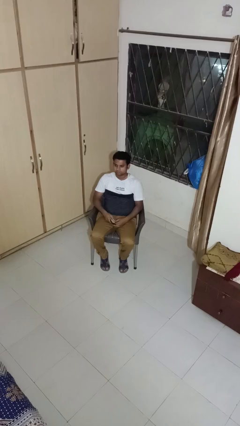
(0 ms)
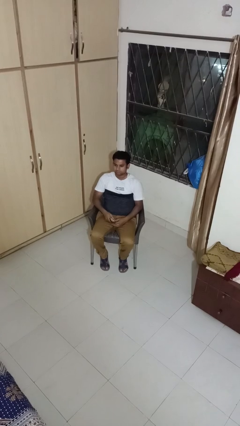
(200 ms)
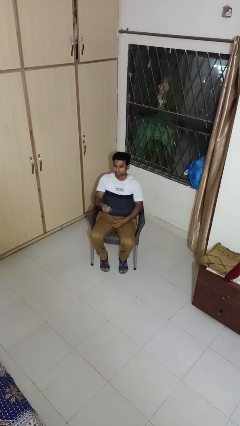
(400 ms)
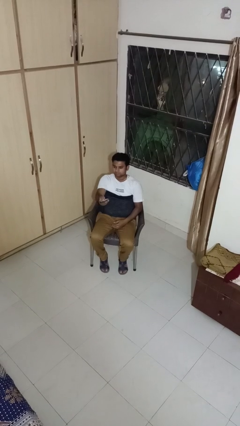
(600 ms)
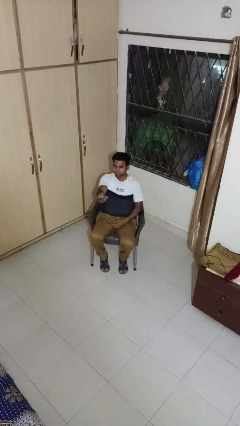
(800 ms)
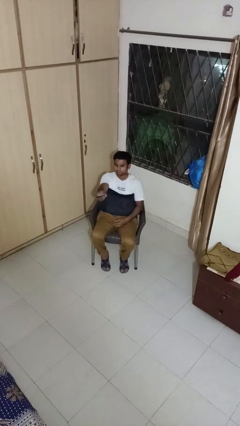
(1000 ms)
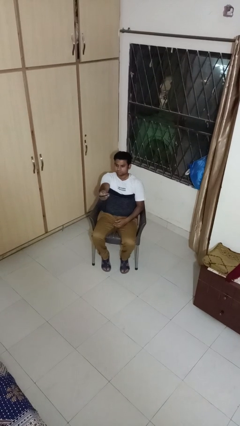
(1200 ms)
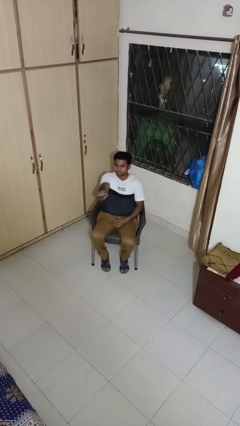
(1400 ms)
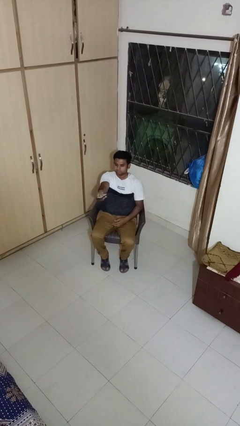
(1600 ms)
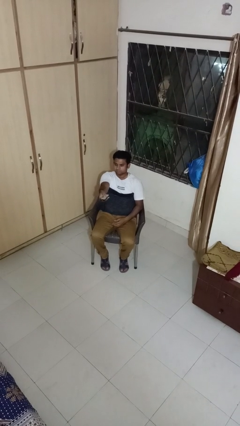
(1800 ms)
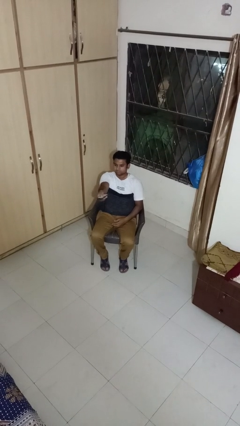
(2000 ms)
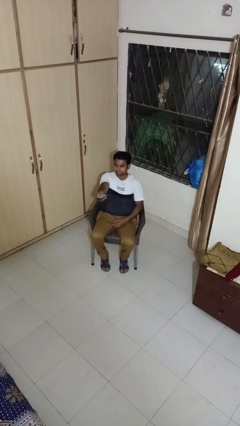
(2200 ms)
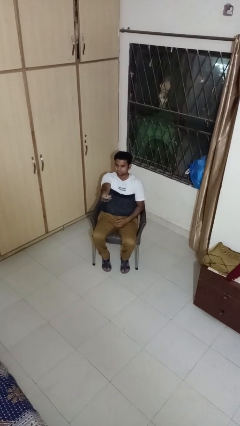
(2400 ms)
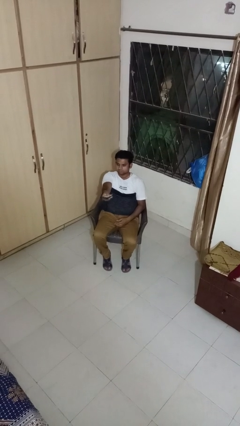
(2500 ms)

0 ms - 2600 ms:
person uses television remote

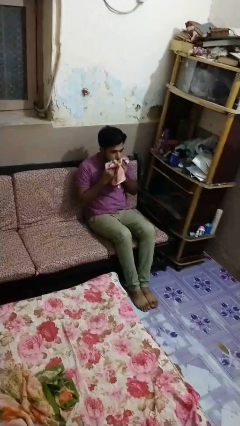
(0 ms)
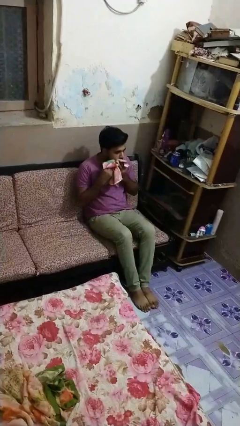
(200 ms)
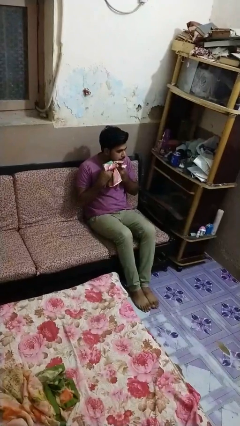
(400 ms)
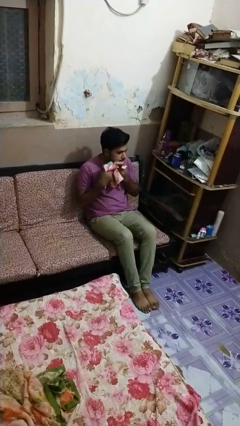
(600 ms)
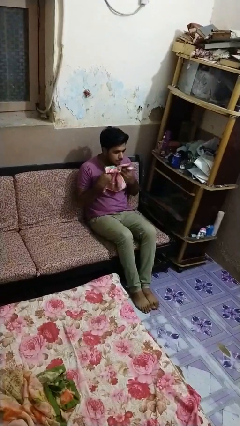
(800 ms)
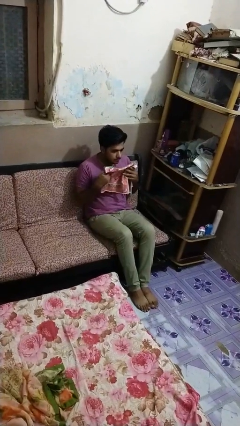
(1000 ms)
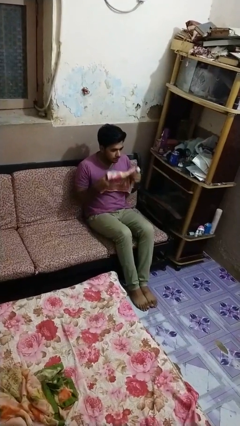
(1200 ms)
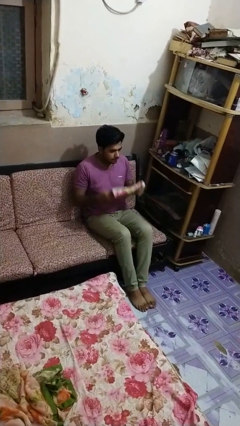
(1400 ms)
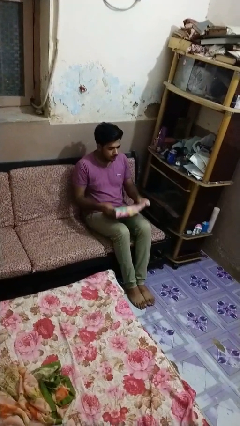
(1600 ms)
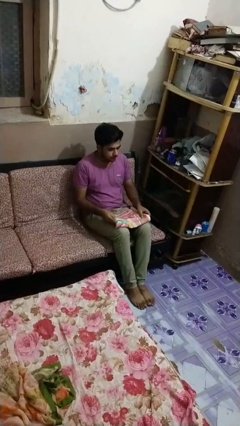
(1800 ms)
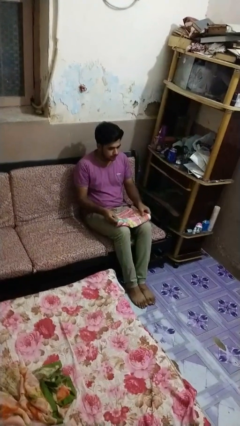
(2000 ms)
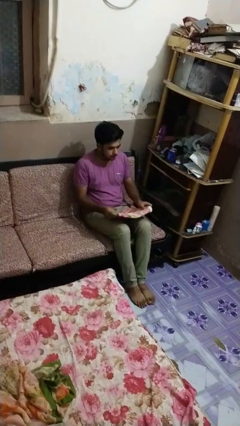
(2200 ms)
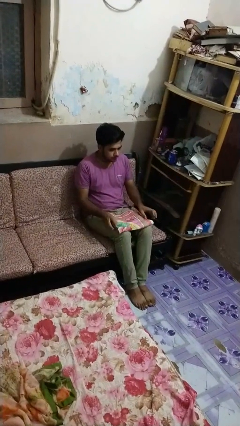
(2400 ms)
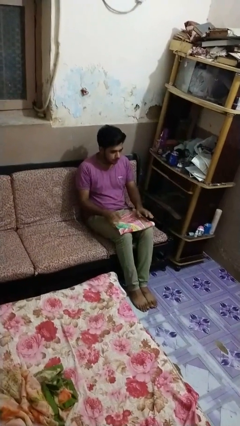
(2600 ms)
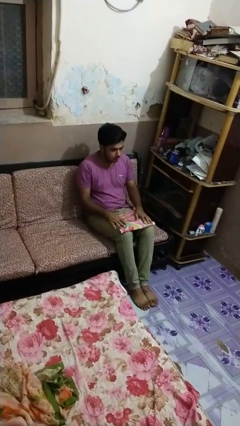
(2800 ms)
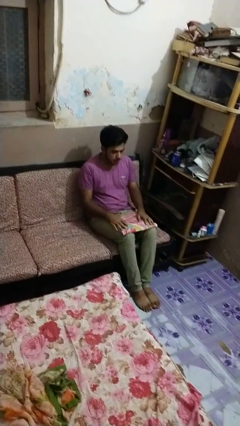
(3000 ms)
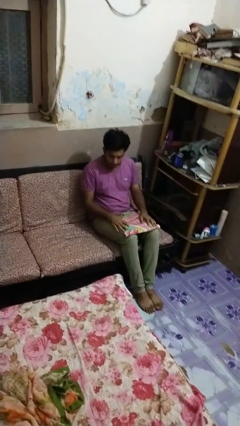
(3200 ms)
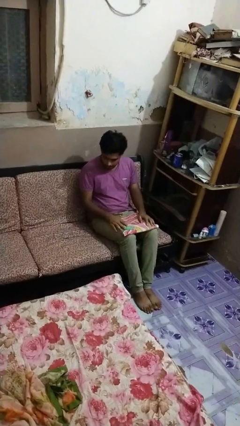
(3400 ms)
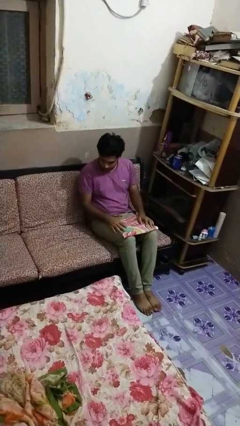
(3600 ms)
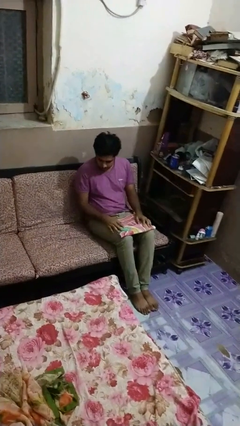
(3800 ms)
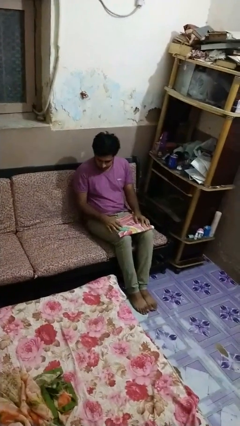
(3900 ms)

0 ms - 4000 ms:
person wipes mouth with napkin

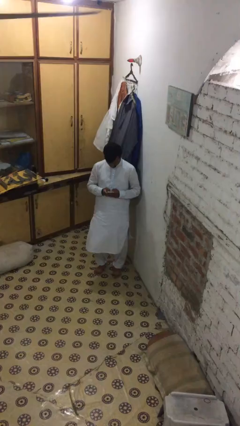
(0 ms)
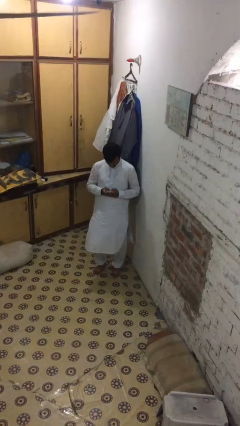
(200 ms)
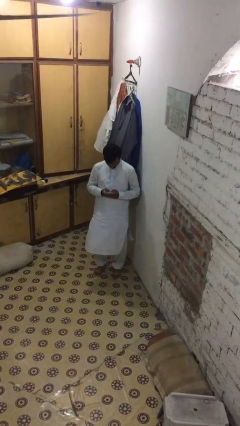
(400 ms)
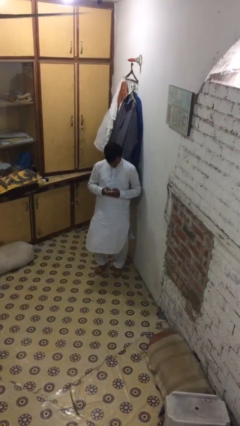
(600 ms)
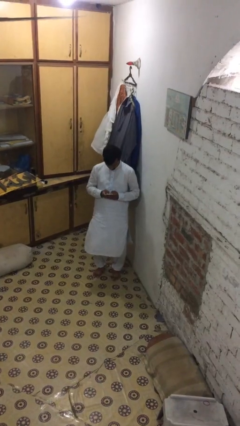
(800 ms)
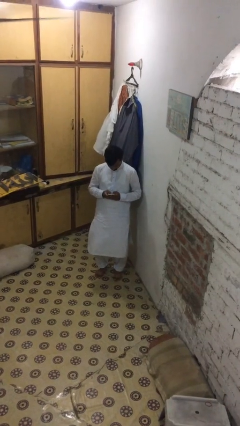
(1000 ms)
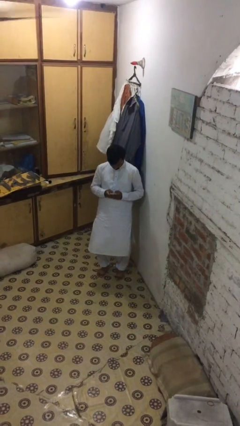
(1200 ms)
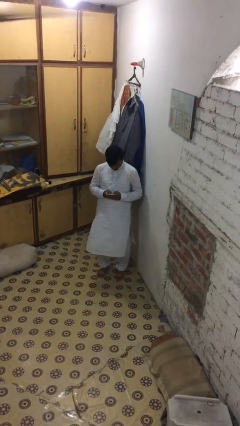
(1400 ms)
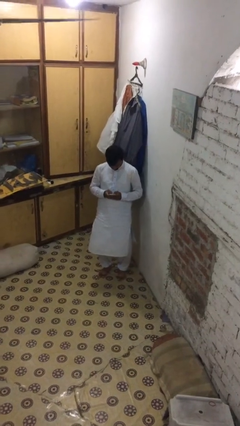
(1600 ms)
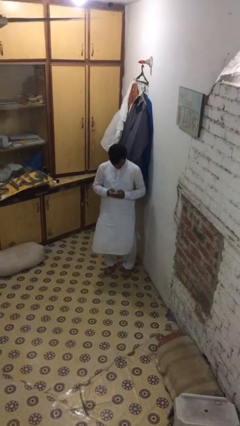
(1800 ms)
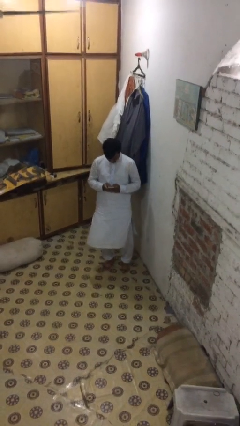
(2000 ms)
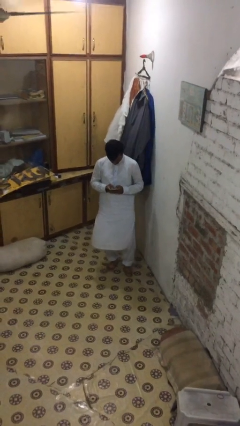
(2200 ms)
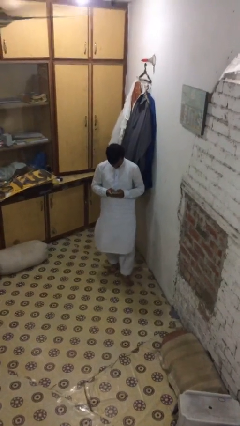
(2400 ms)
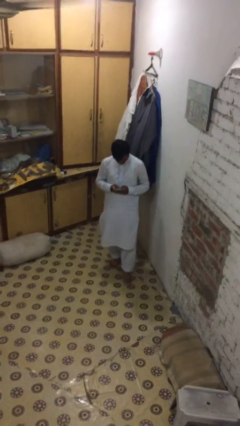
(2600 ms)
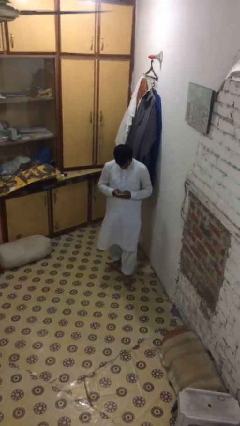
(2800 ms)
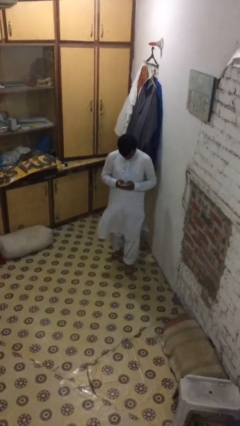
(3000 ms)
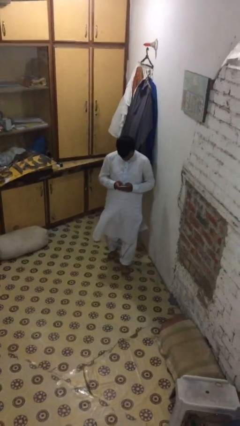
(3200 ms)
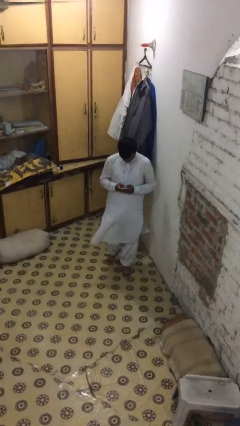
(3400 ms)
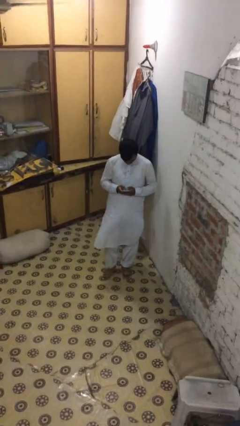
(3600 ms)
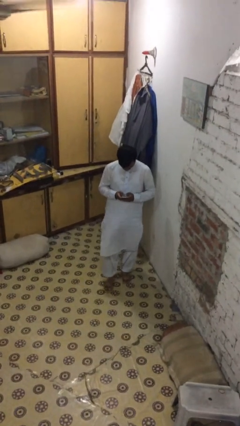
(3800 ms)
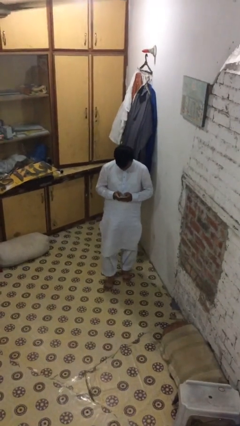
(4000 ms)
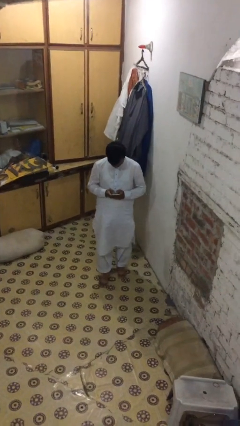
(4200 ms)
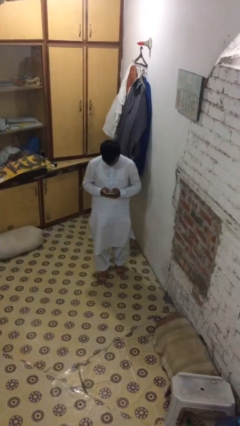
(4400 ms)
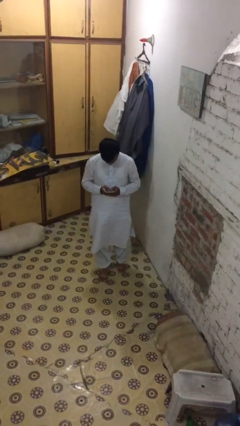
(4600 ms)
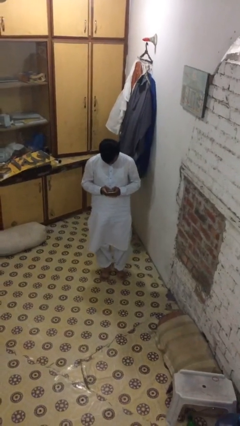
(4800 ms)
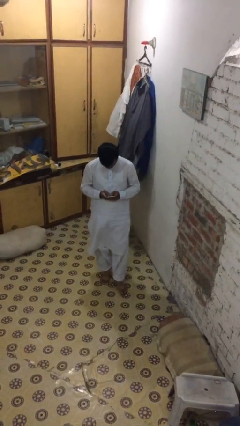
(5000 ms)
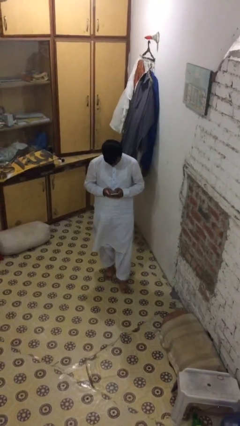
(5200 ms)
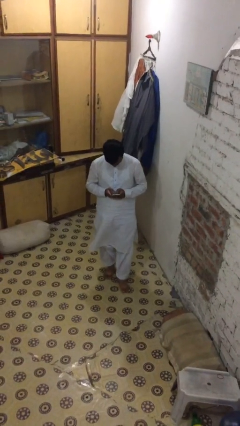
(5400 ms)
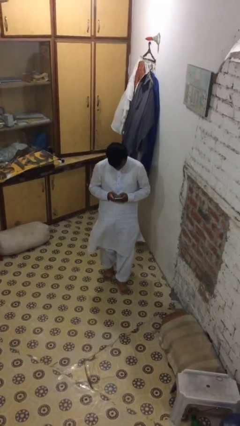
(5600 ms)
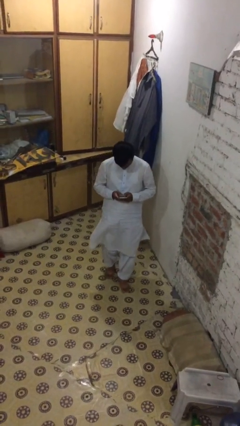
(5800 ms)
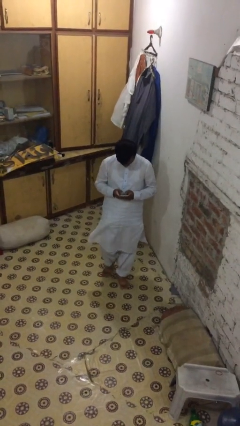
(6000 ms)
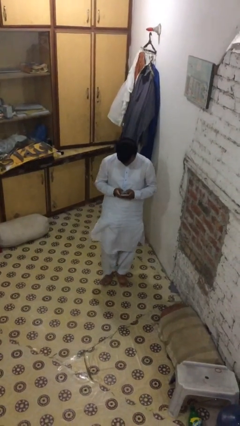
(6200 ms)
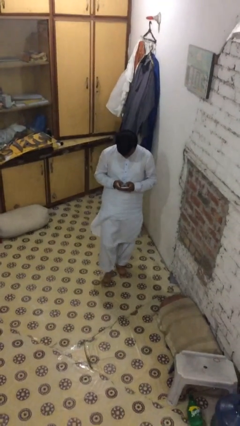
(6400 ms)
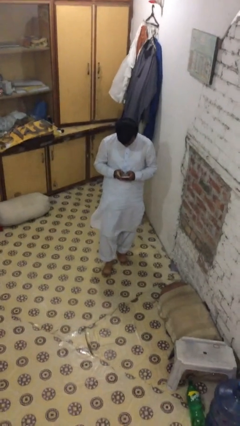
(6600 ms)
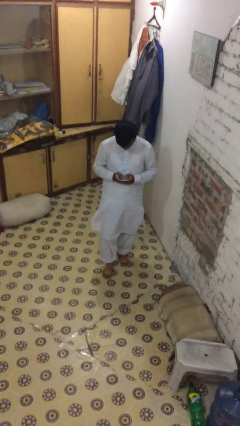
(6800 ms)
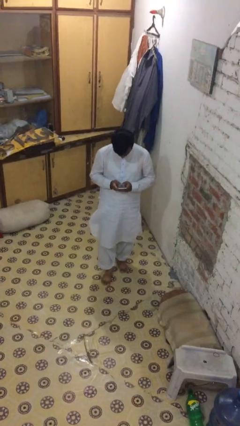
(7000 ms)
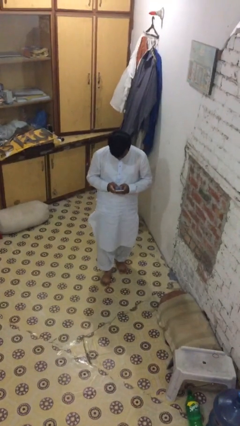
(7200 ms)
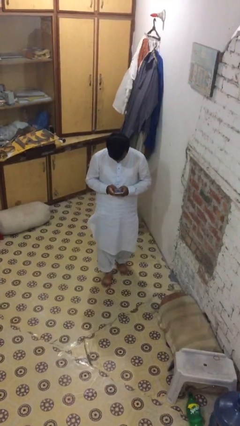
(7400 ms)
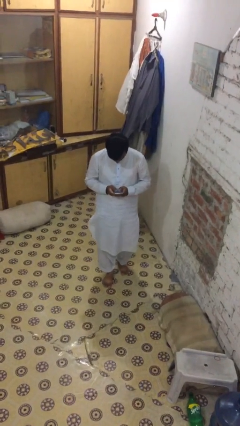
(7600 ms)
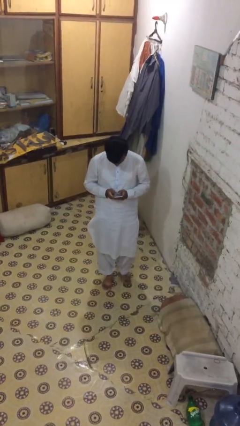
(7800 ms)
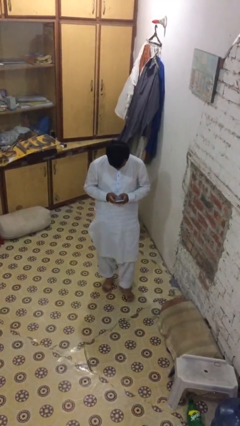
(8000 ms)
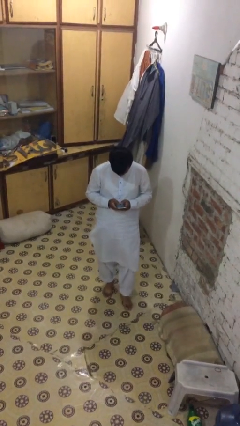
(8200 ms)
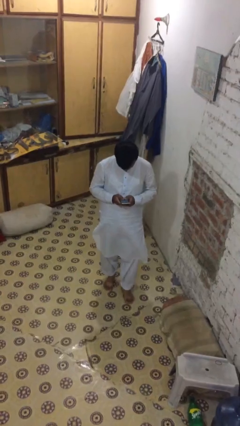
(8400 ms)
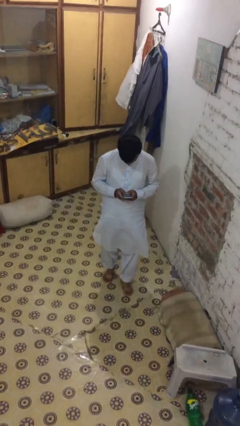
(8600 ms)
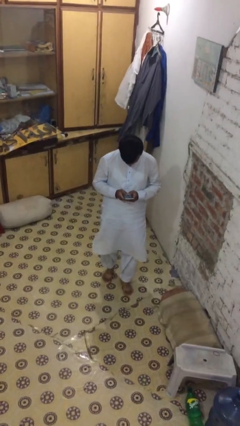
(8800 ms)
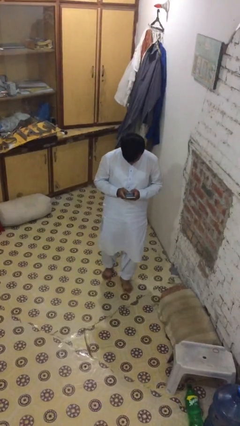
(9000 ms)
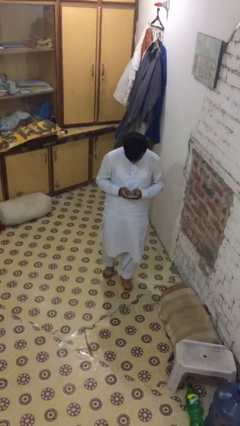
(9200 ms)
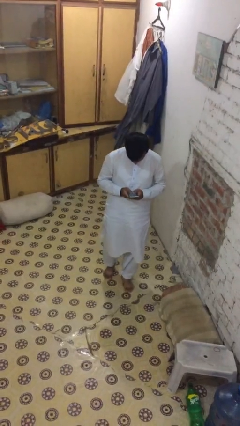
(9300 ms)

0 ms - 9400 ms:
person texts on phone

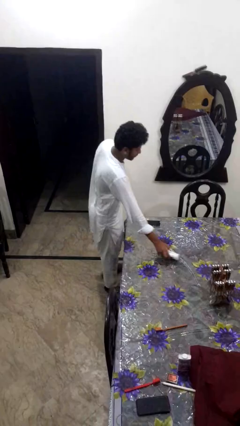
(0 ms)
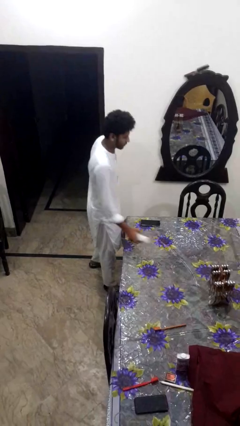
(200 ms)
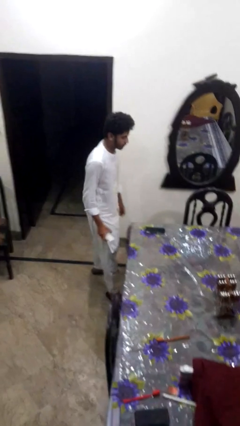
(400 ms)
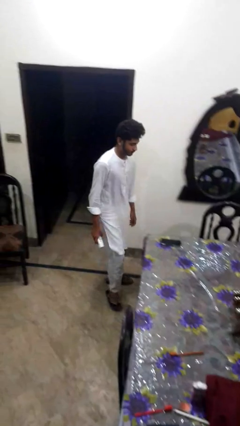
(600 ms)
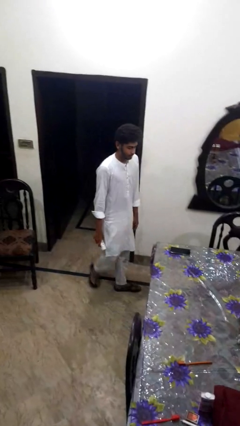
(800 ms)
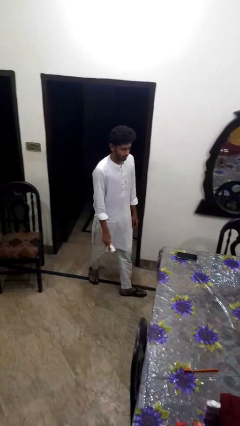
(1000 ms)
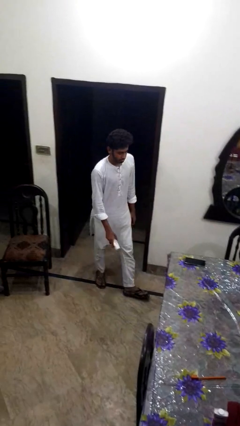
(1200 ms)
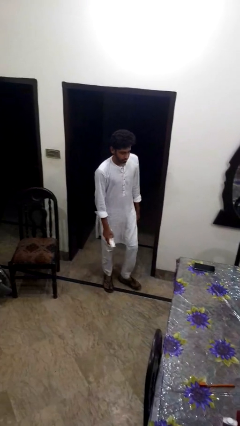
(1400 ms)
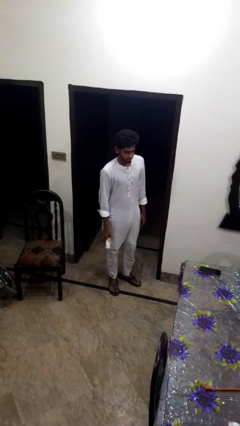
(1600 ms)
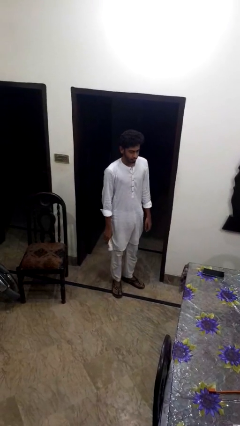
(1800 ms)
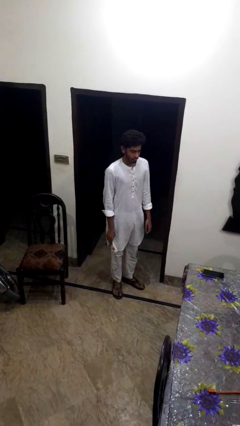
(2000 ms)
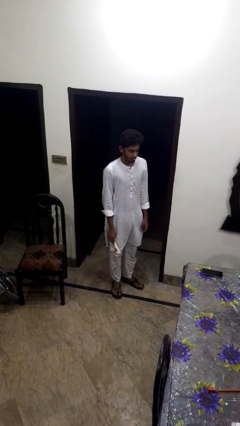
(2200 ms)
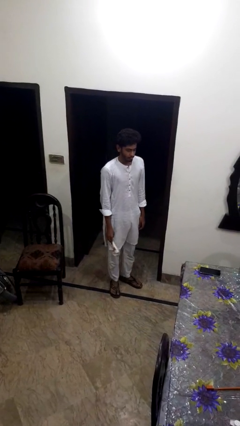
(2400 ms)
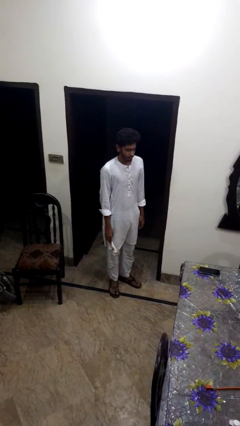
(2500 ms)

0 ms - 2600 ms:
person picks up object from table
